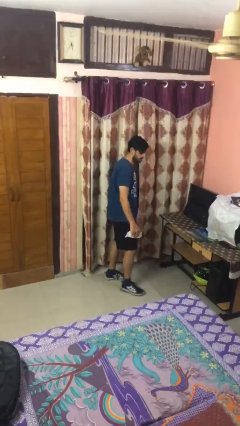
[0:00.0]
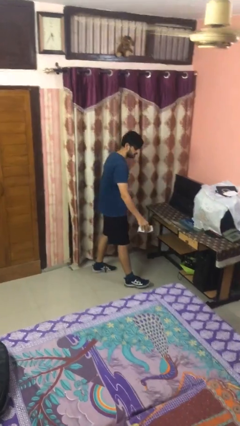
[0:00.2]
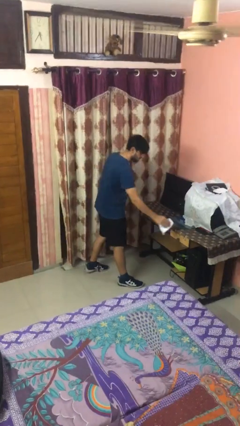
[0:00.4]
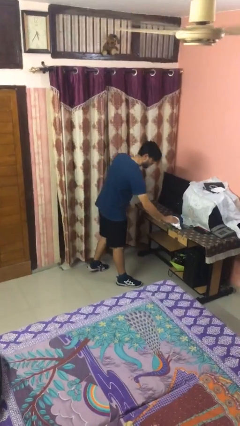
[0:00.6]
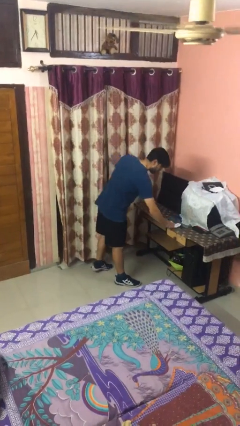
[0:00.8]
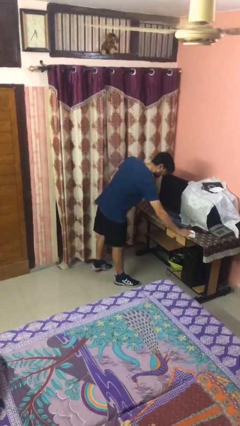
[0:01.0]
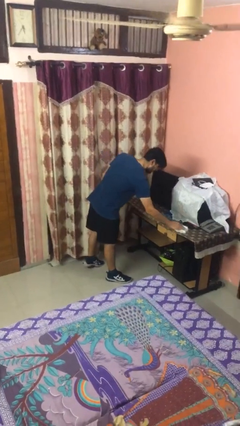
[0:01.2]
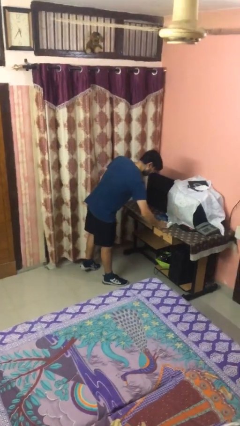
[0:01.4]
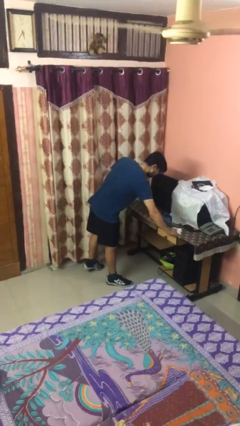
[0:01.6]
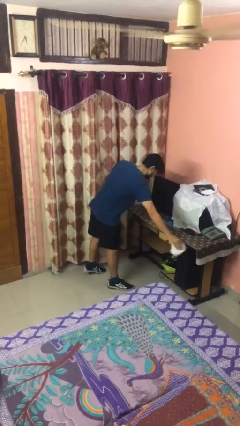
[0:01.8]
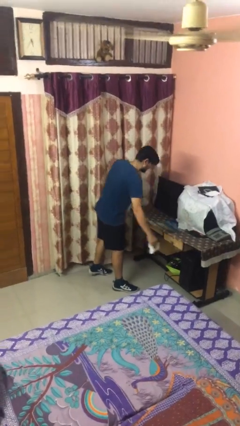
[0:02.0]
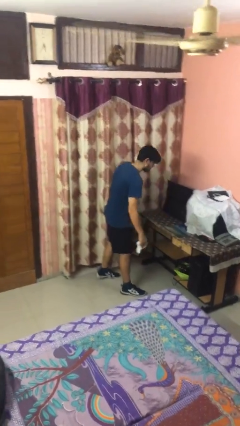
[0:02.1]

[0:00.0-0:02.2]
person cleans table with rag

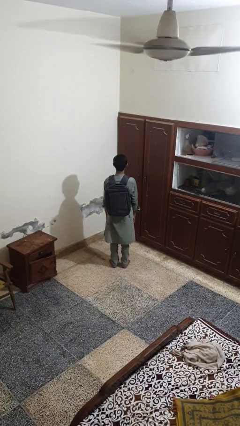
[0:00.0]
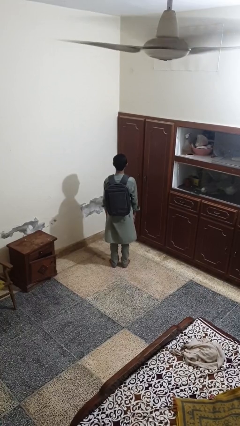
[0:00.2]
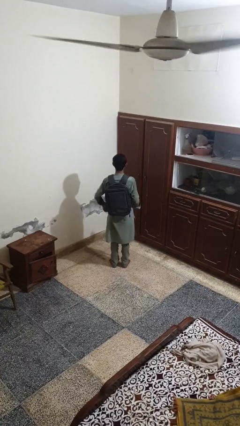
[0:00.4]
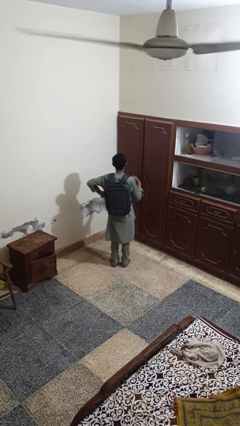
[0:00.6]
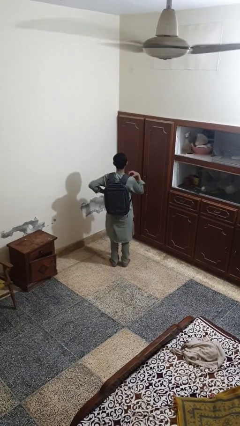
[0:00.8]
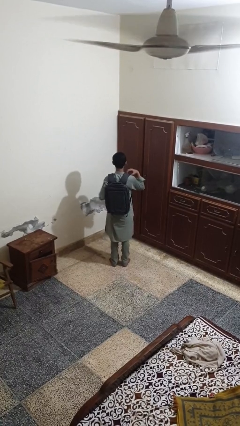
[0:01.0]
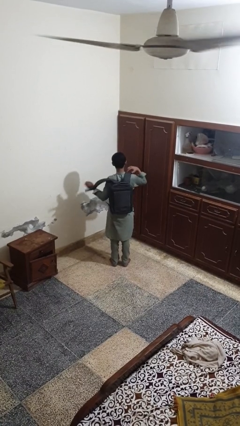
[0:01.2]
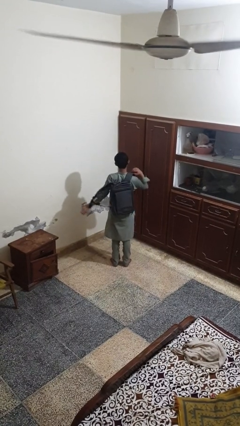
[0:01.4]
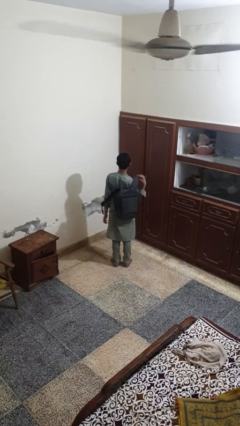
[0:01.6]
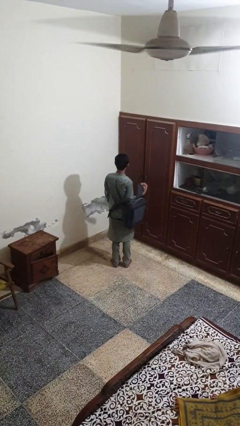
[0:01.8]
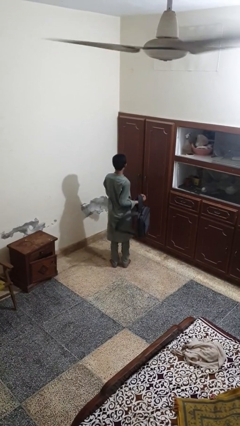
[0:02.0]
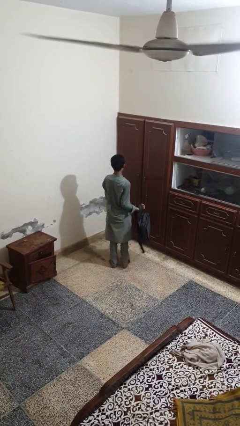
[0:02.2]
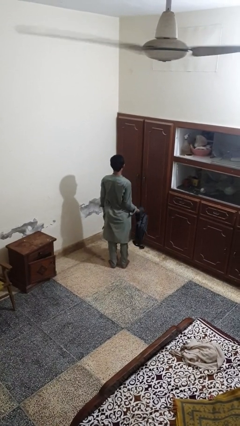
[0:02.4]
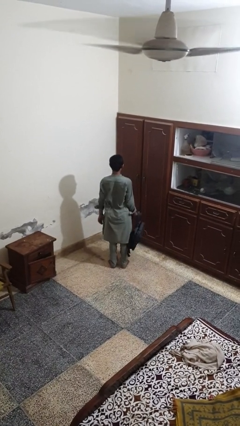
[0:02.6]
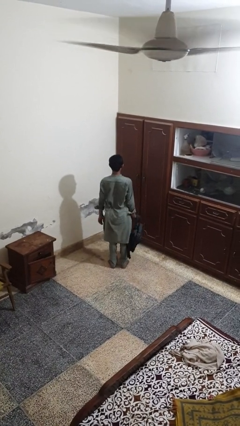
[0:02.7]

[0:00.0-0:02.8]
person takes off backpack

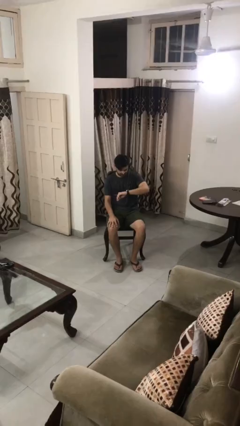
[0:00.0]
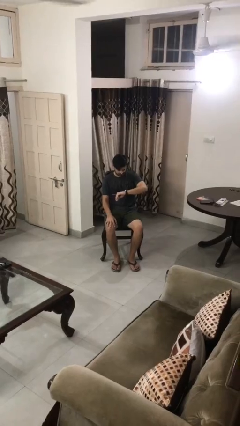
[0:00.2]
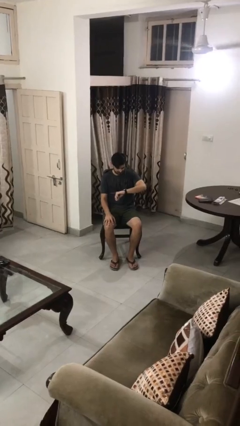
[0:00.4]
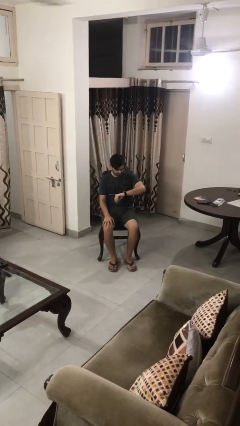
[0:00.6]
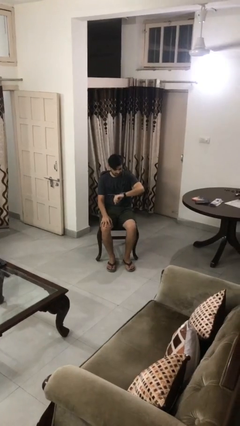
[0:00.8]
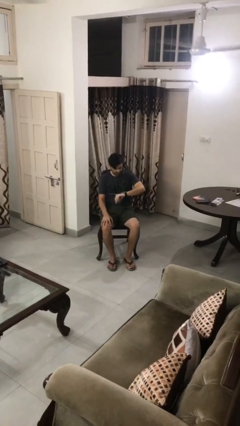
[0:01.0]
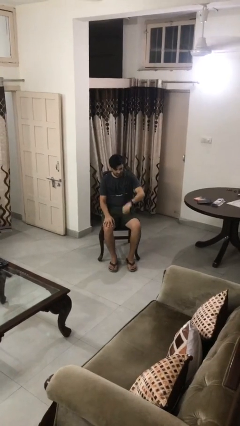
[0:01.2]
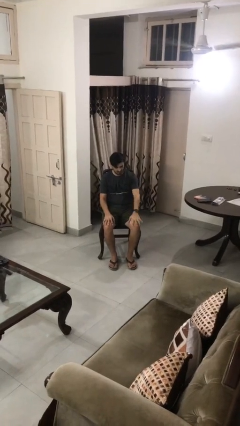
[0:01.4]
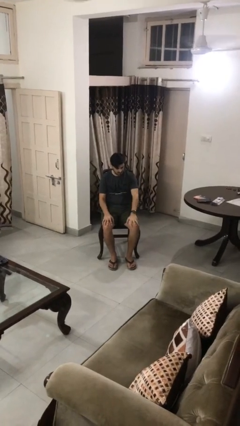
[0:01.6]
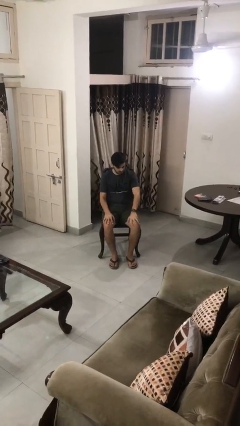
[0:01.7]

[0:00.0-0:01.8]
person looks at wristwatch

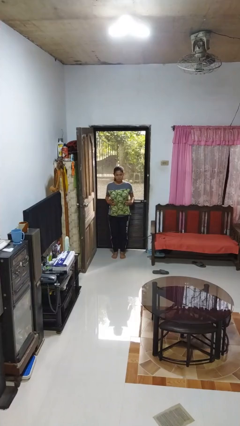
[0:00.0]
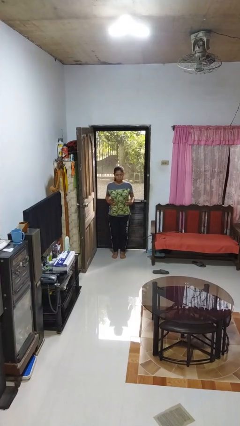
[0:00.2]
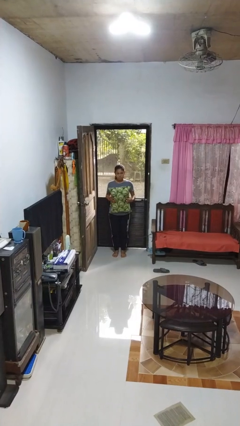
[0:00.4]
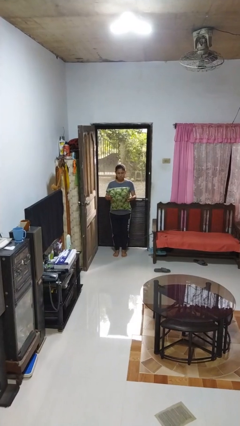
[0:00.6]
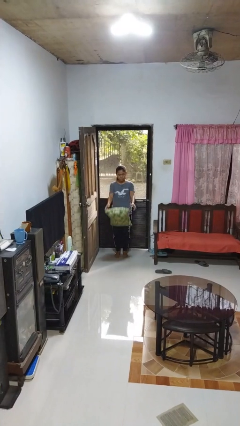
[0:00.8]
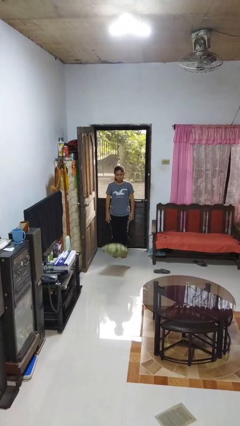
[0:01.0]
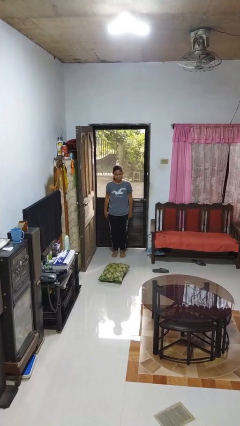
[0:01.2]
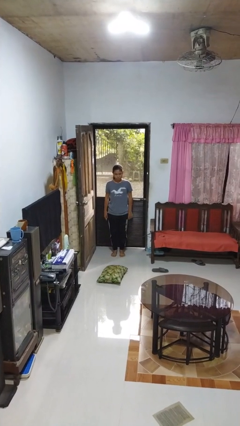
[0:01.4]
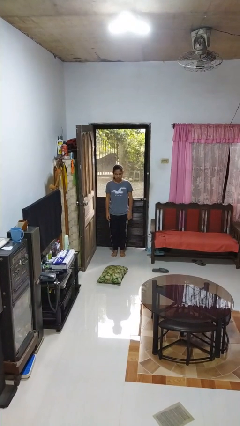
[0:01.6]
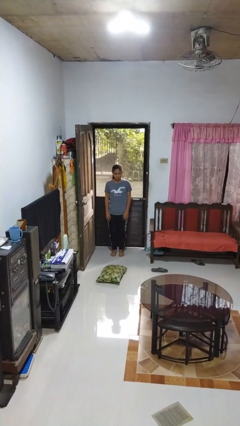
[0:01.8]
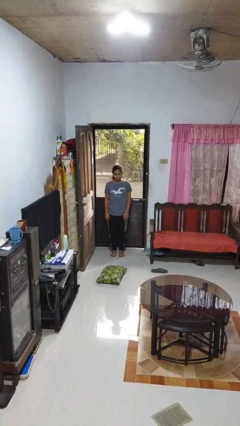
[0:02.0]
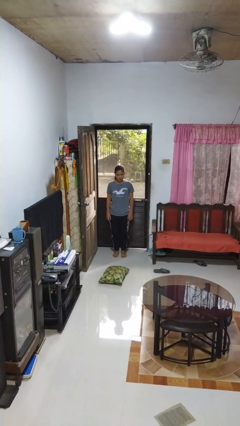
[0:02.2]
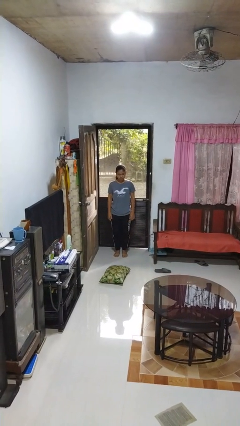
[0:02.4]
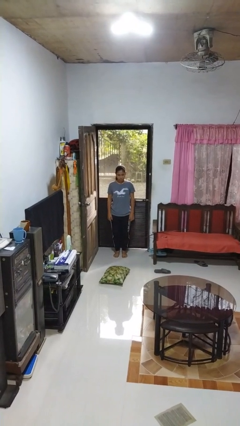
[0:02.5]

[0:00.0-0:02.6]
person throws object into air

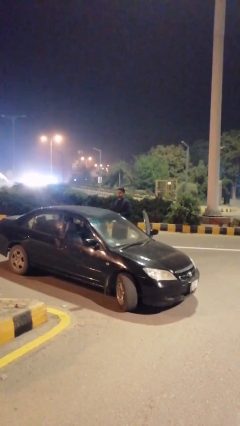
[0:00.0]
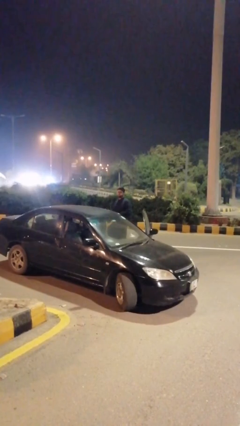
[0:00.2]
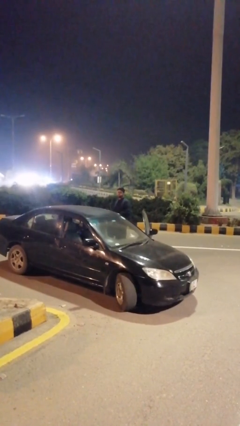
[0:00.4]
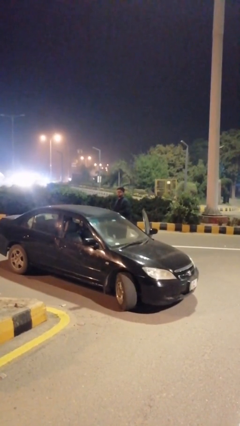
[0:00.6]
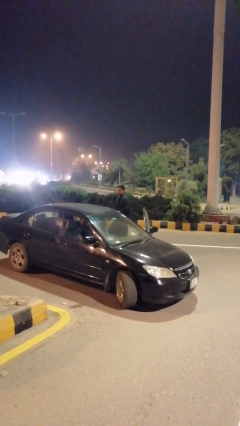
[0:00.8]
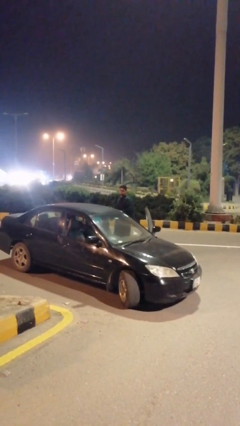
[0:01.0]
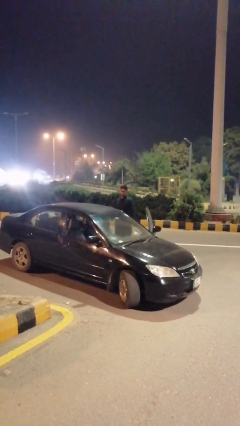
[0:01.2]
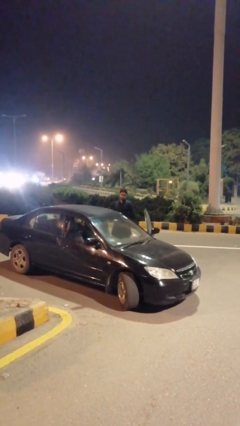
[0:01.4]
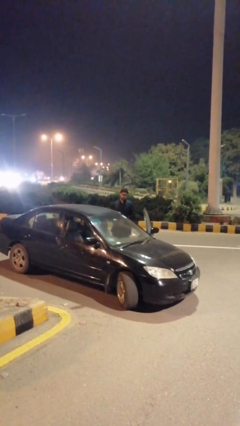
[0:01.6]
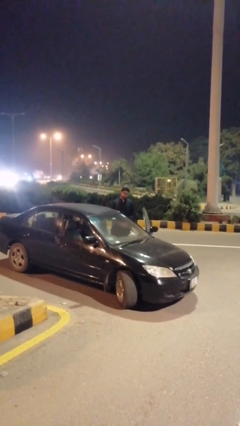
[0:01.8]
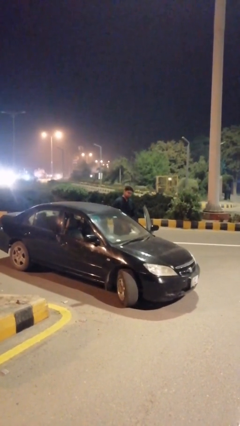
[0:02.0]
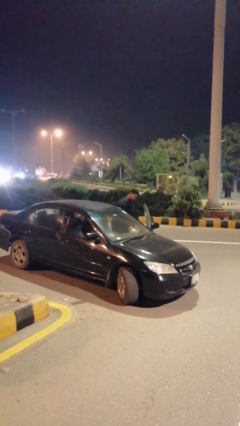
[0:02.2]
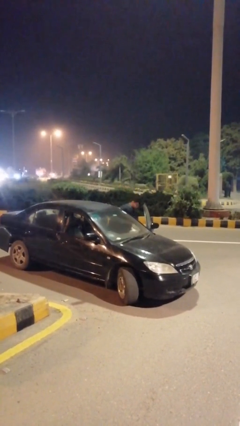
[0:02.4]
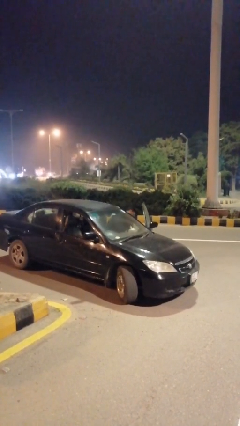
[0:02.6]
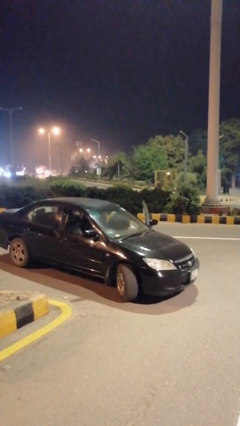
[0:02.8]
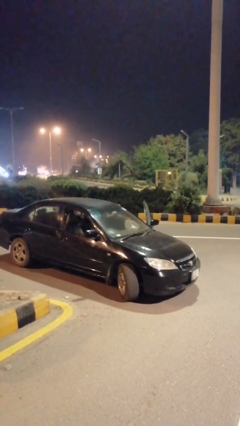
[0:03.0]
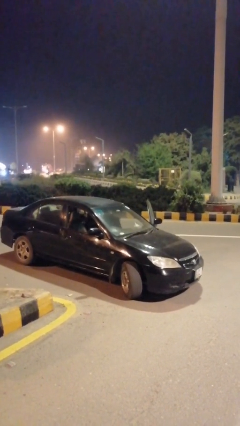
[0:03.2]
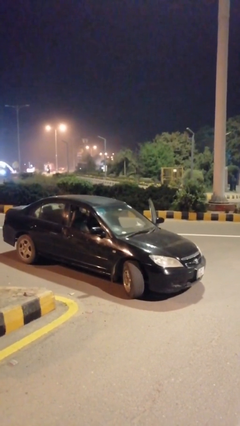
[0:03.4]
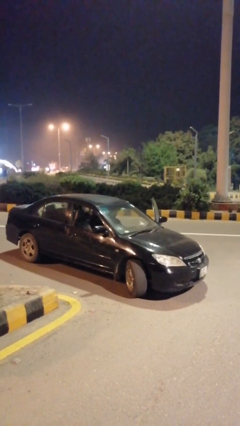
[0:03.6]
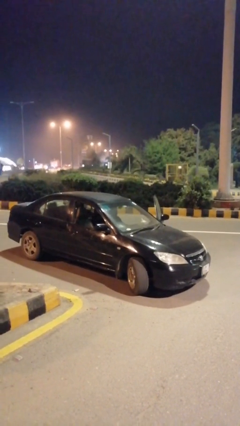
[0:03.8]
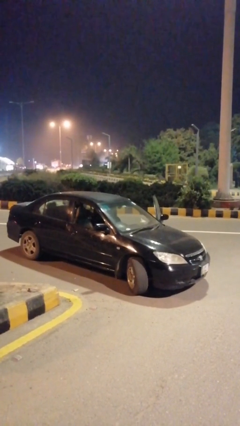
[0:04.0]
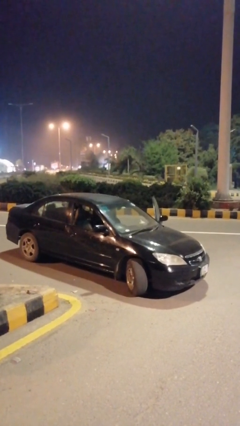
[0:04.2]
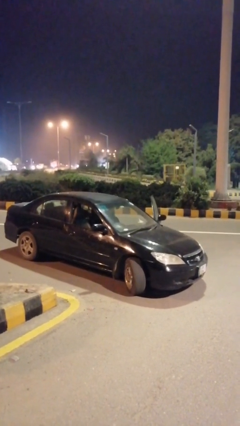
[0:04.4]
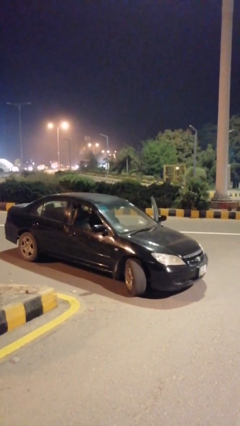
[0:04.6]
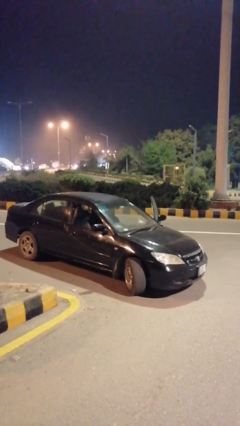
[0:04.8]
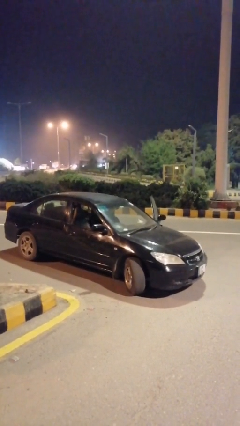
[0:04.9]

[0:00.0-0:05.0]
person enters car

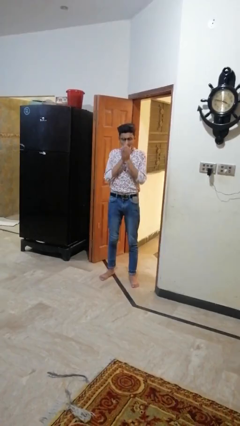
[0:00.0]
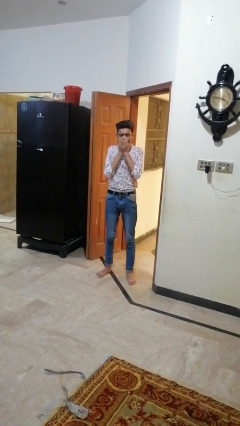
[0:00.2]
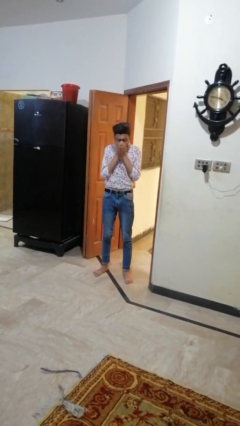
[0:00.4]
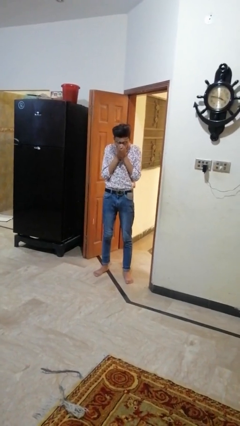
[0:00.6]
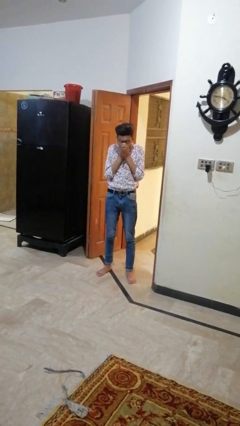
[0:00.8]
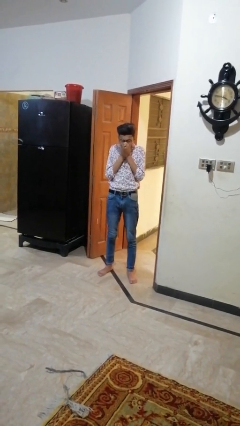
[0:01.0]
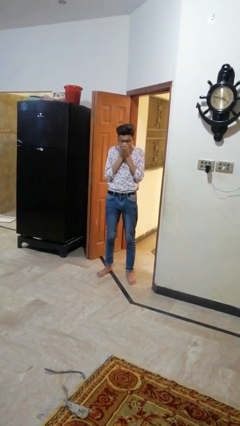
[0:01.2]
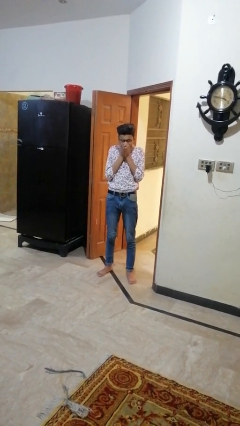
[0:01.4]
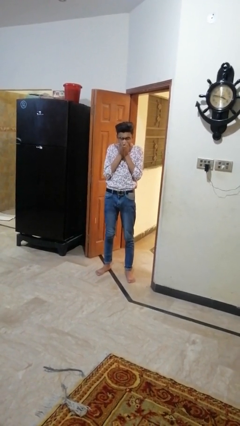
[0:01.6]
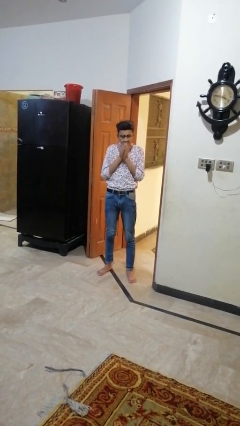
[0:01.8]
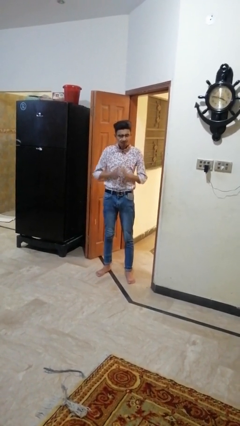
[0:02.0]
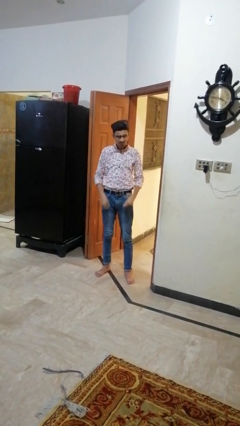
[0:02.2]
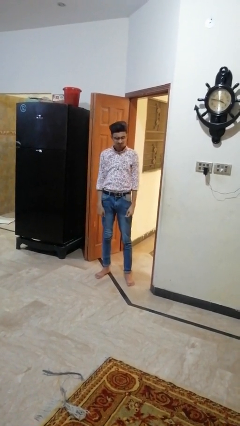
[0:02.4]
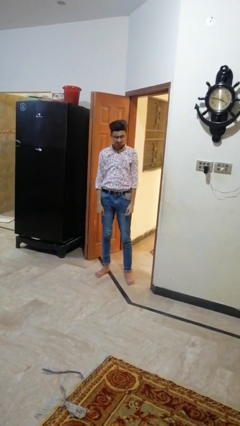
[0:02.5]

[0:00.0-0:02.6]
person sneezes into hand
